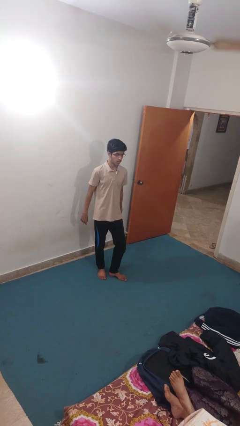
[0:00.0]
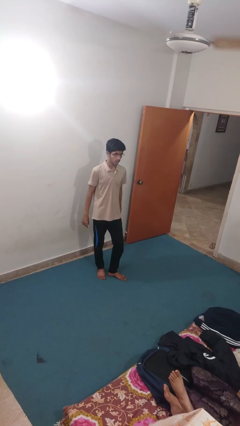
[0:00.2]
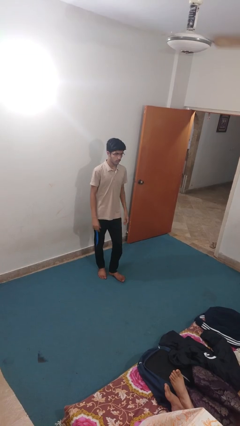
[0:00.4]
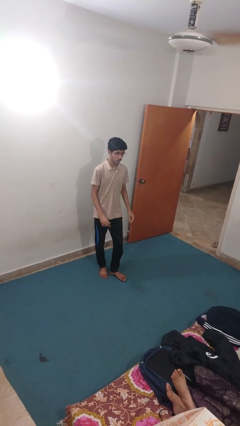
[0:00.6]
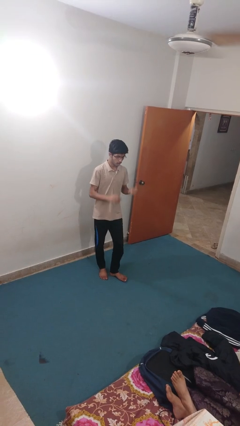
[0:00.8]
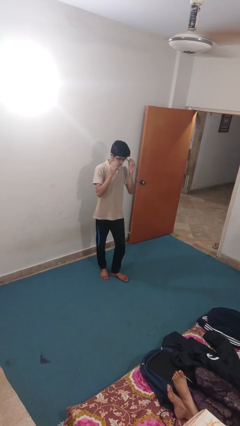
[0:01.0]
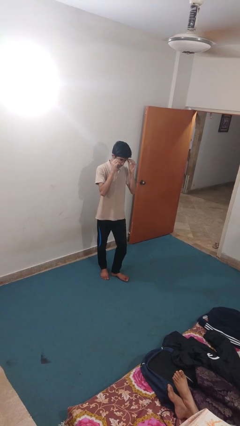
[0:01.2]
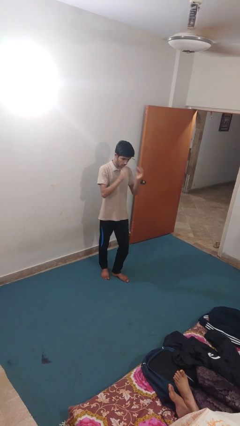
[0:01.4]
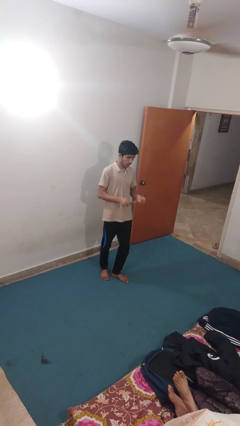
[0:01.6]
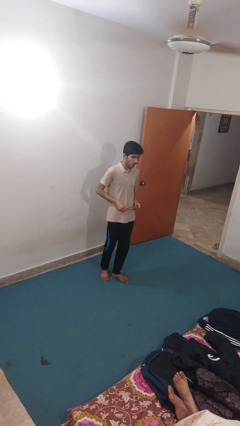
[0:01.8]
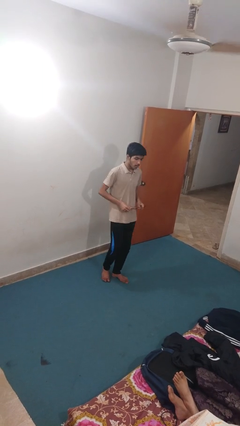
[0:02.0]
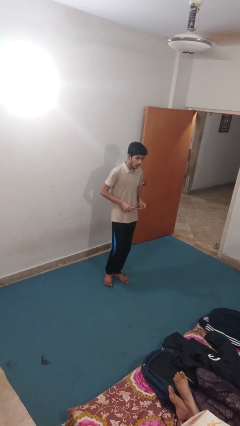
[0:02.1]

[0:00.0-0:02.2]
person takes off glasses

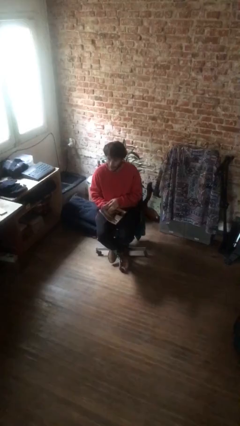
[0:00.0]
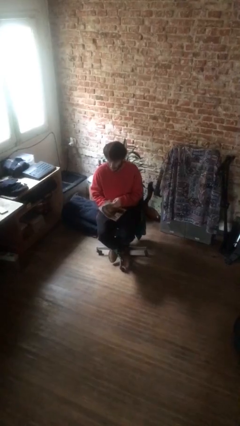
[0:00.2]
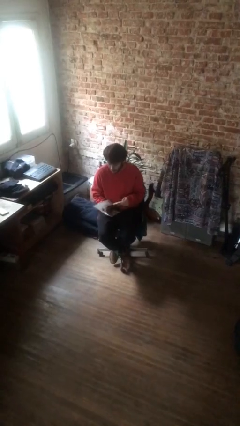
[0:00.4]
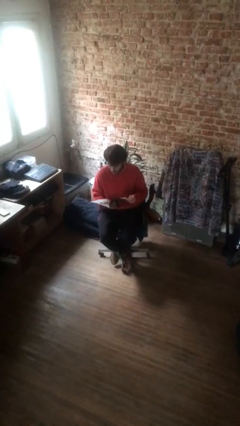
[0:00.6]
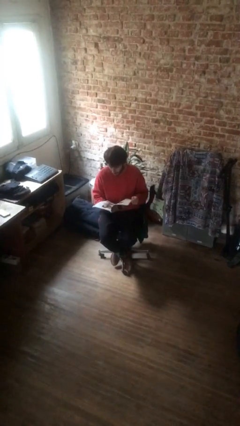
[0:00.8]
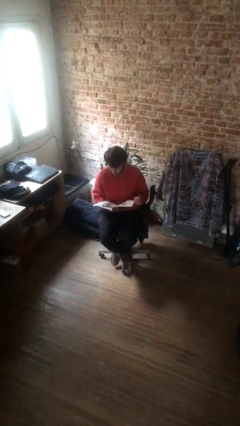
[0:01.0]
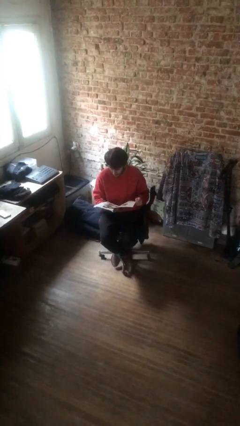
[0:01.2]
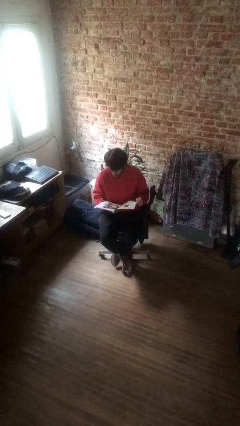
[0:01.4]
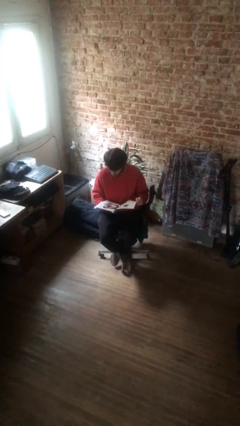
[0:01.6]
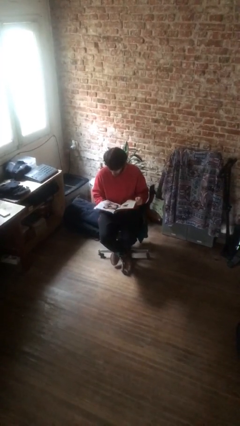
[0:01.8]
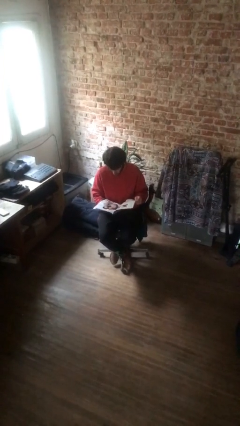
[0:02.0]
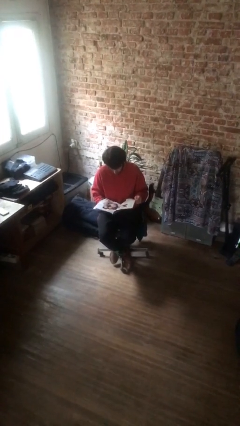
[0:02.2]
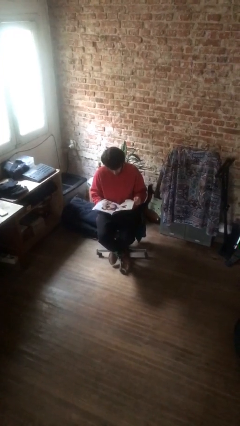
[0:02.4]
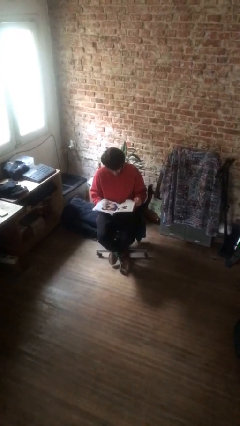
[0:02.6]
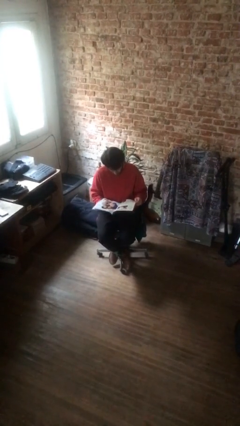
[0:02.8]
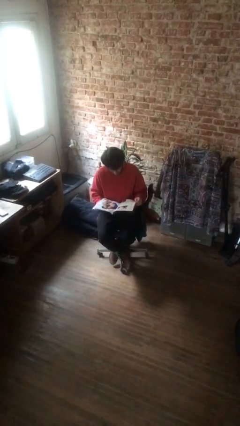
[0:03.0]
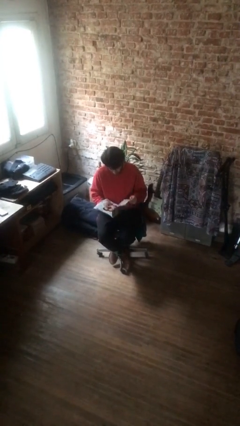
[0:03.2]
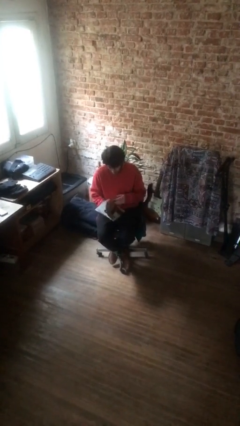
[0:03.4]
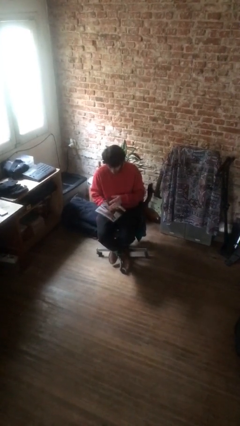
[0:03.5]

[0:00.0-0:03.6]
person reads magazine

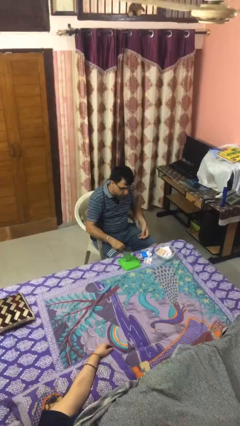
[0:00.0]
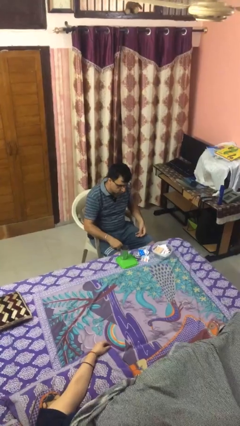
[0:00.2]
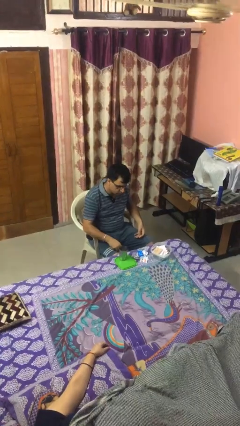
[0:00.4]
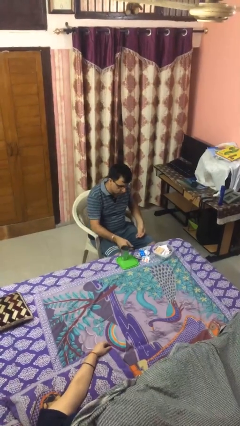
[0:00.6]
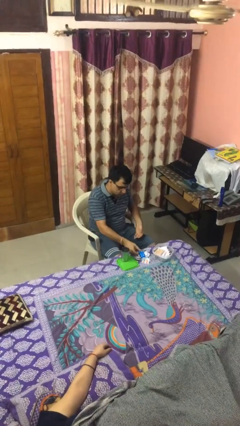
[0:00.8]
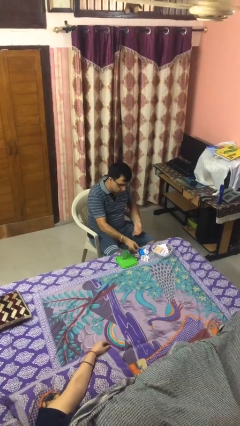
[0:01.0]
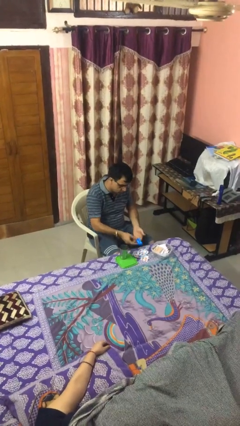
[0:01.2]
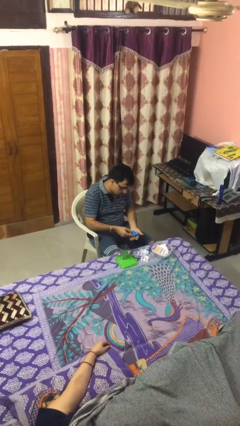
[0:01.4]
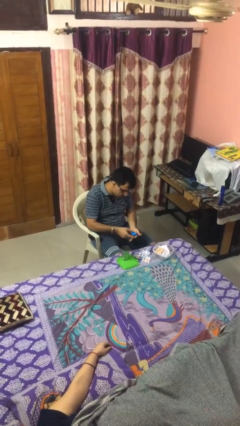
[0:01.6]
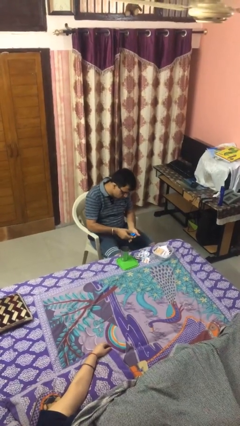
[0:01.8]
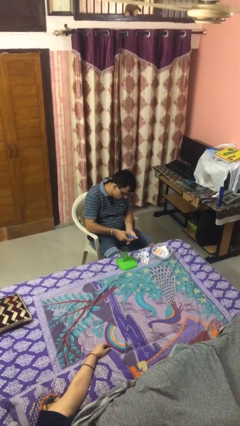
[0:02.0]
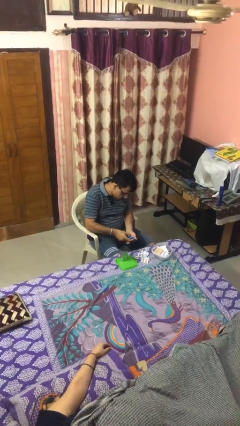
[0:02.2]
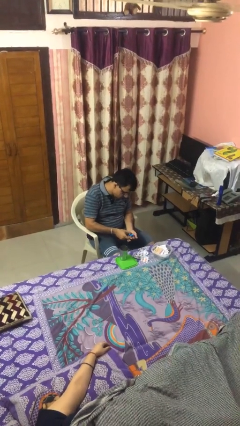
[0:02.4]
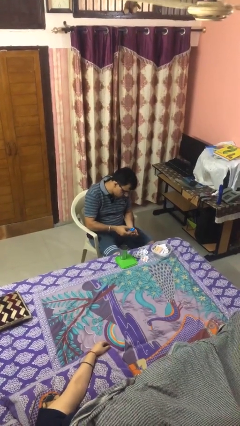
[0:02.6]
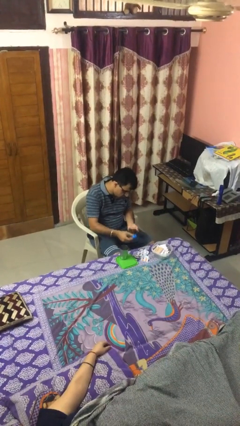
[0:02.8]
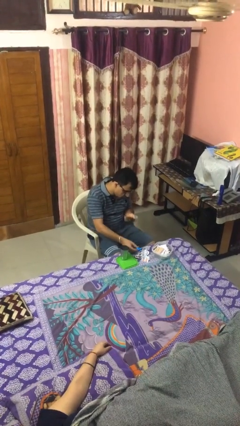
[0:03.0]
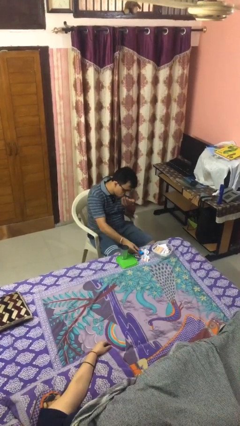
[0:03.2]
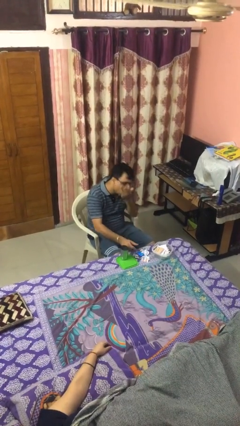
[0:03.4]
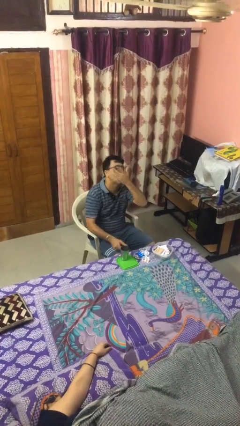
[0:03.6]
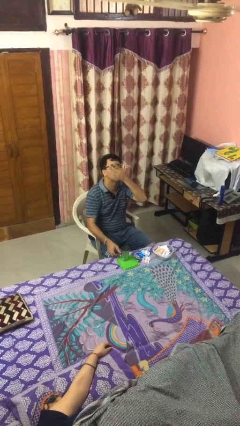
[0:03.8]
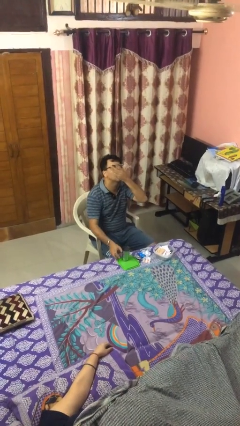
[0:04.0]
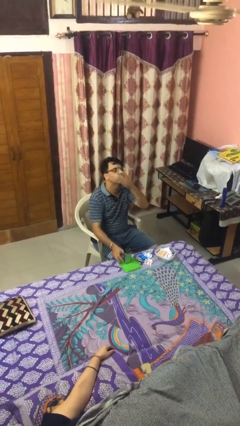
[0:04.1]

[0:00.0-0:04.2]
person takes medicine pills

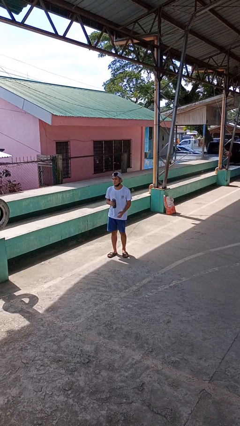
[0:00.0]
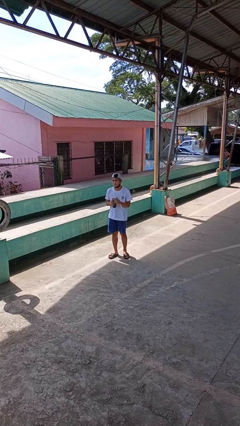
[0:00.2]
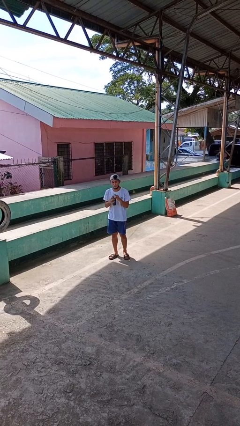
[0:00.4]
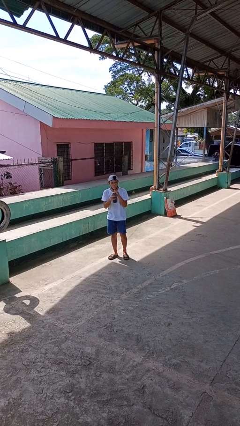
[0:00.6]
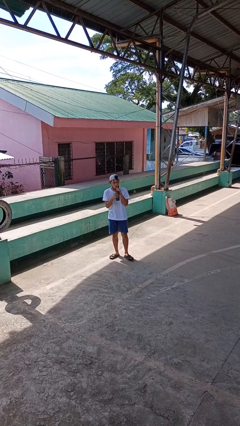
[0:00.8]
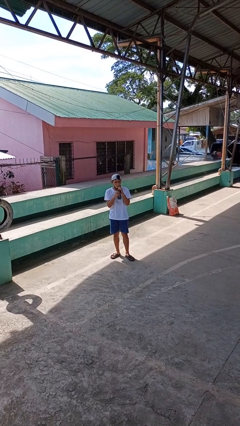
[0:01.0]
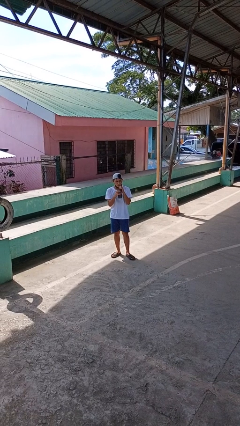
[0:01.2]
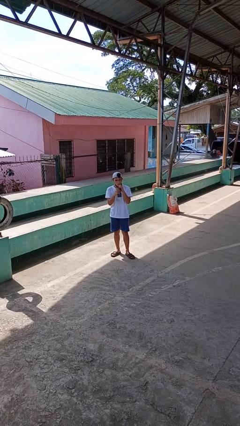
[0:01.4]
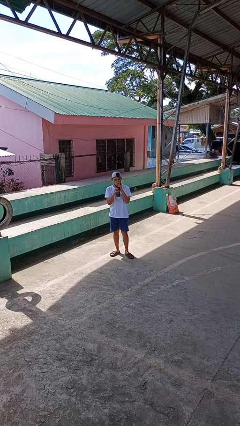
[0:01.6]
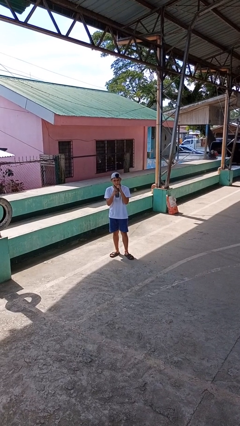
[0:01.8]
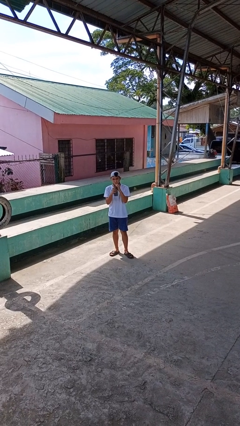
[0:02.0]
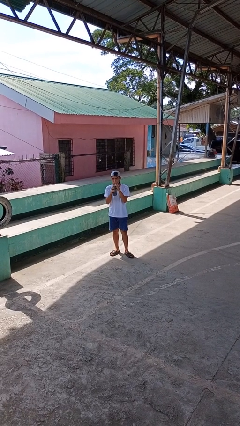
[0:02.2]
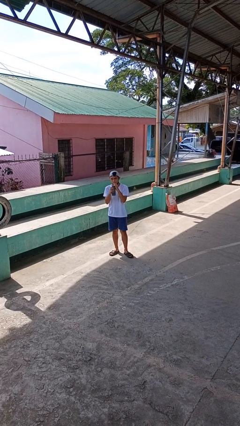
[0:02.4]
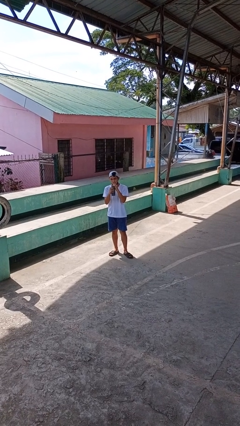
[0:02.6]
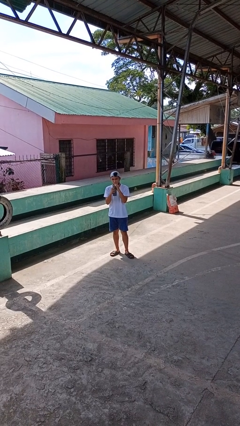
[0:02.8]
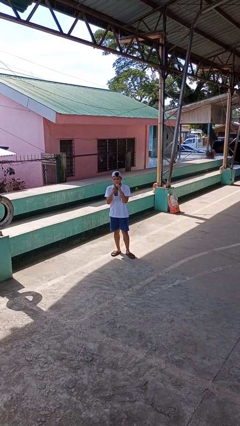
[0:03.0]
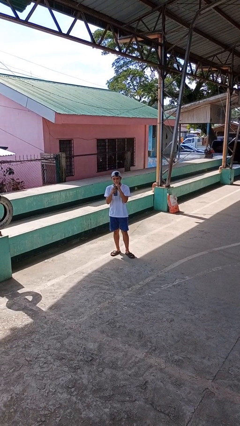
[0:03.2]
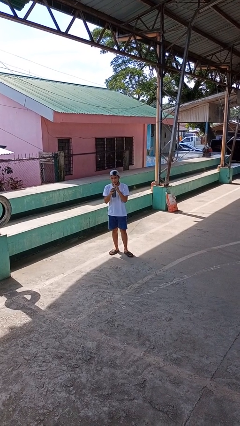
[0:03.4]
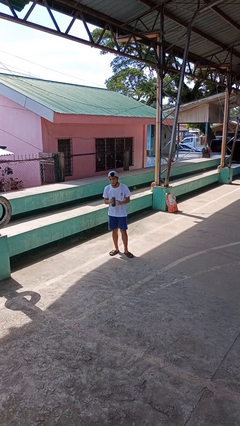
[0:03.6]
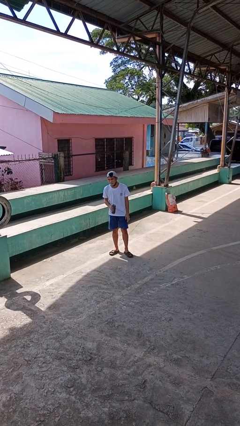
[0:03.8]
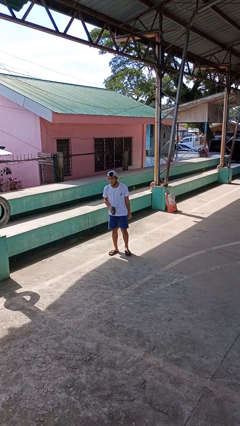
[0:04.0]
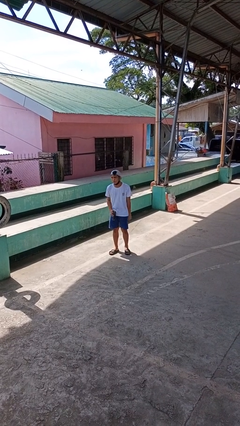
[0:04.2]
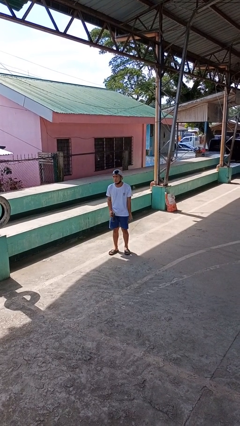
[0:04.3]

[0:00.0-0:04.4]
person drinks from straw

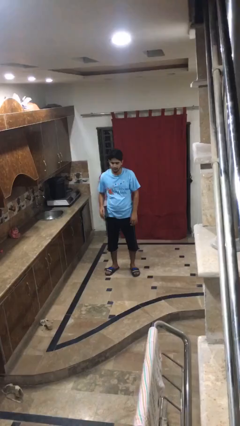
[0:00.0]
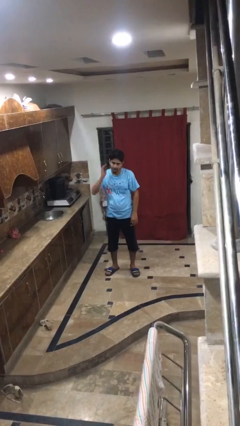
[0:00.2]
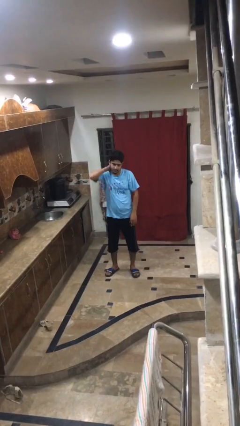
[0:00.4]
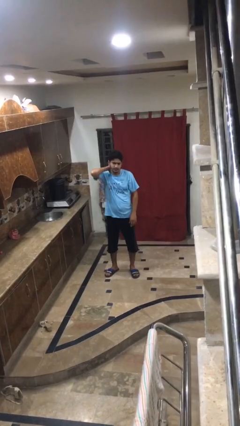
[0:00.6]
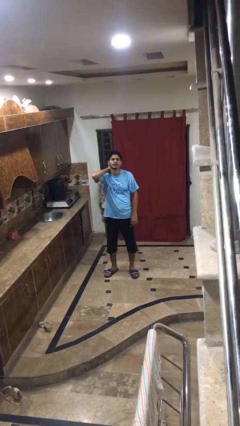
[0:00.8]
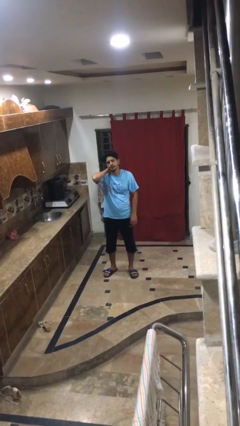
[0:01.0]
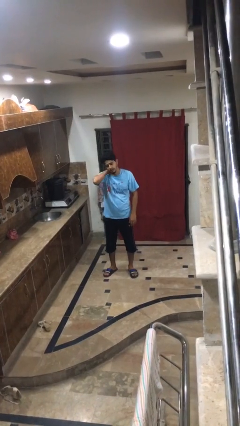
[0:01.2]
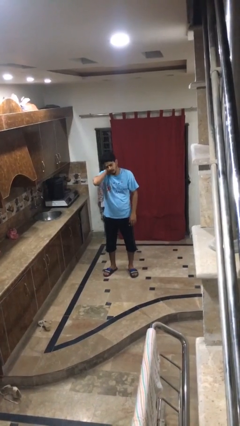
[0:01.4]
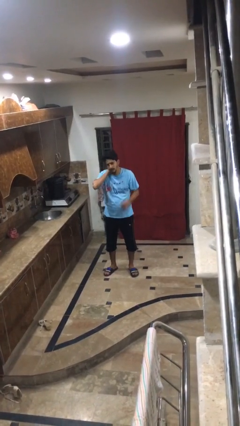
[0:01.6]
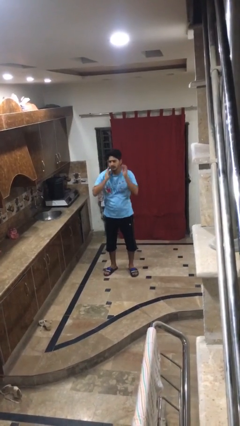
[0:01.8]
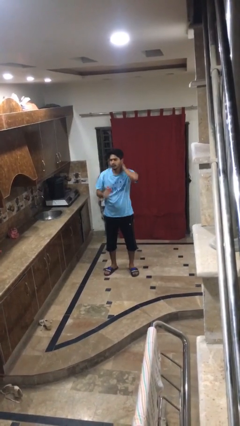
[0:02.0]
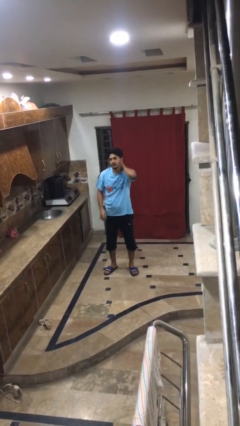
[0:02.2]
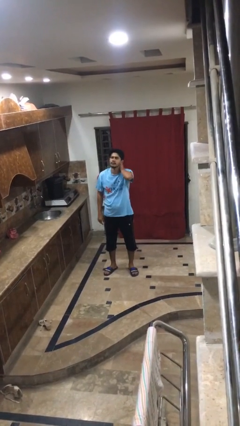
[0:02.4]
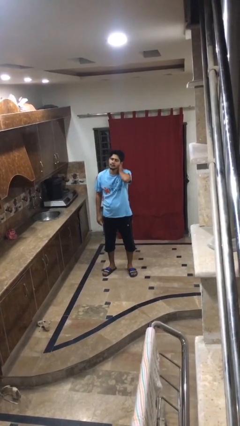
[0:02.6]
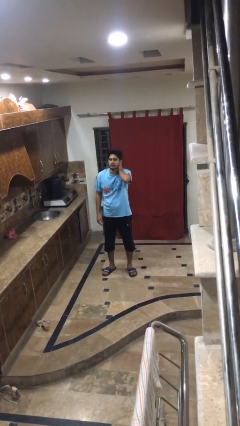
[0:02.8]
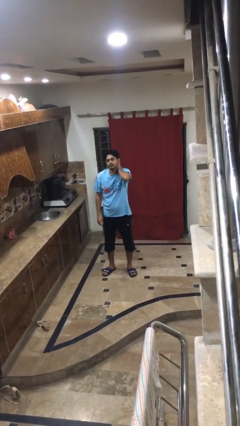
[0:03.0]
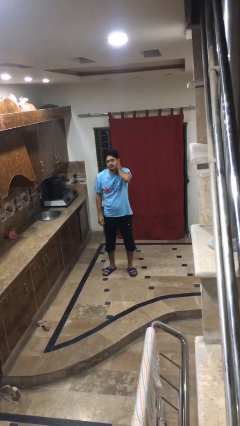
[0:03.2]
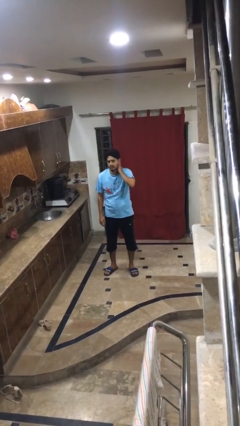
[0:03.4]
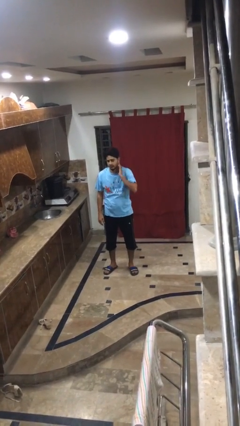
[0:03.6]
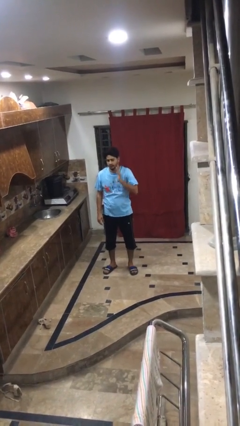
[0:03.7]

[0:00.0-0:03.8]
person rubs neck
